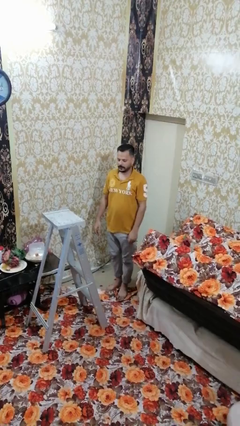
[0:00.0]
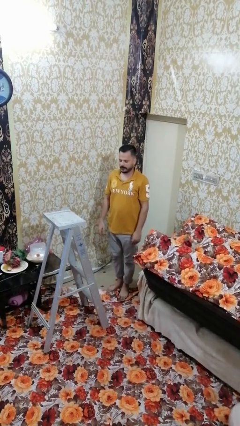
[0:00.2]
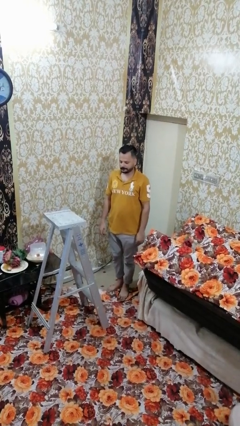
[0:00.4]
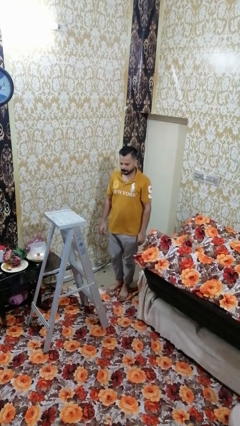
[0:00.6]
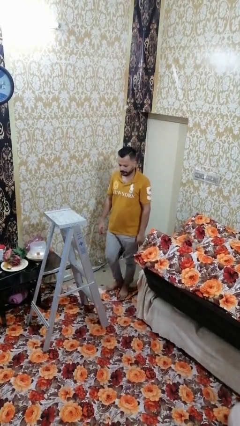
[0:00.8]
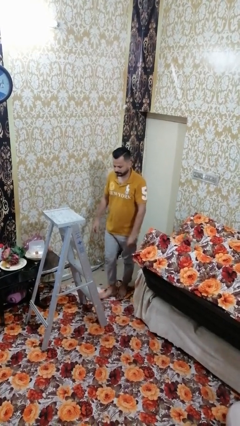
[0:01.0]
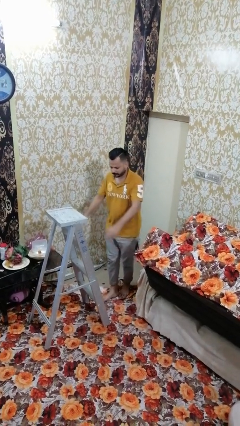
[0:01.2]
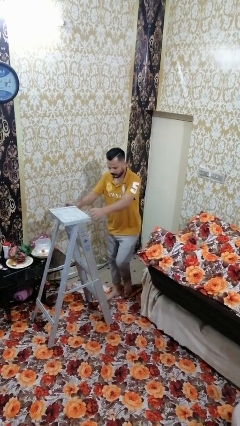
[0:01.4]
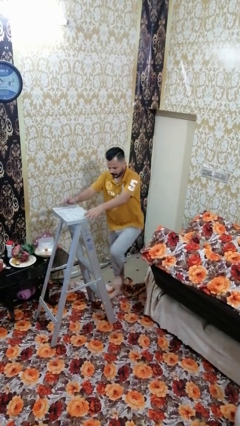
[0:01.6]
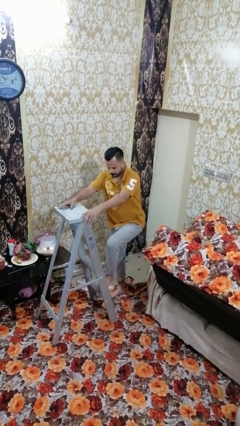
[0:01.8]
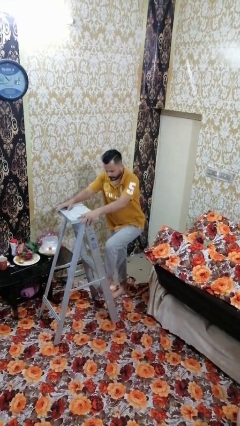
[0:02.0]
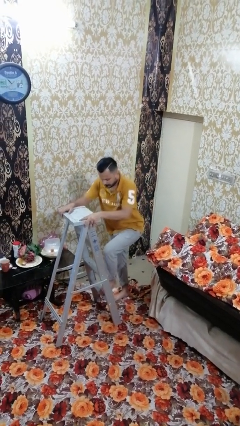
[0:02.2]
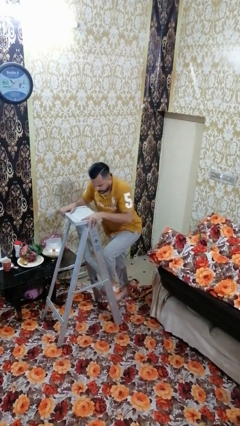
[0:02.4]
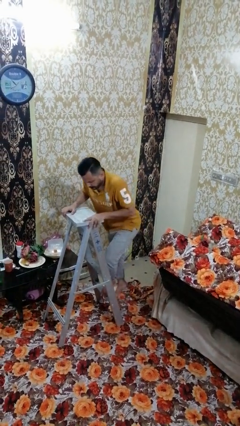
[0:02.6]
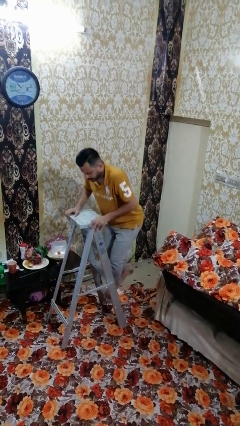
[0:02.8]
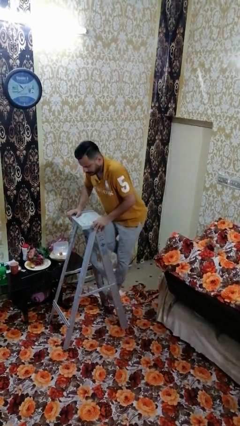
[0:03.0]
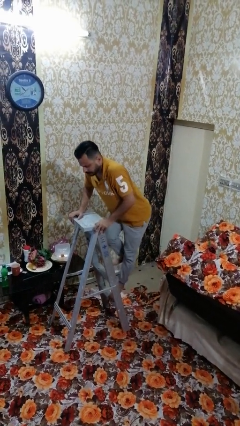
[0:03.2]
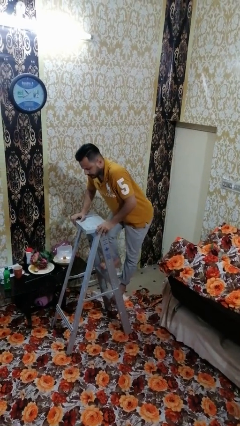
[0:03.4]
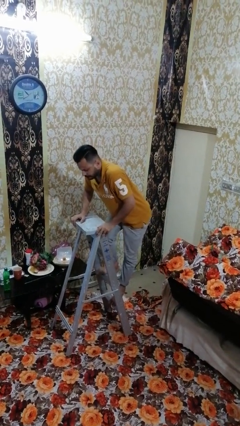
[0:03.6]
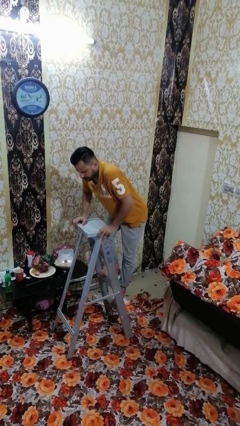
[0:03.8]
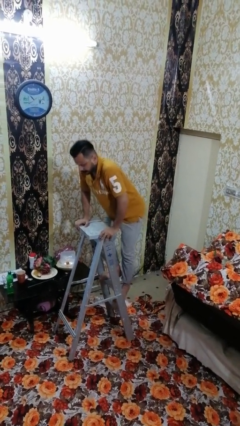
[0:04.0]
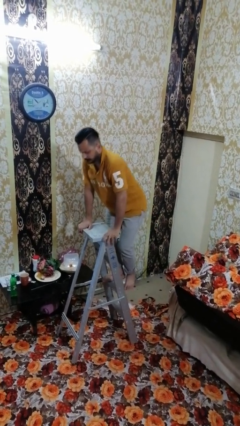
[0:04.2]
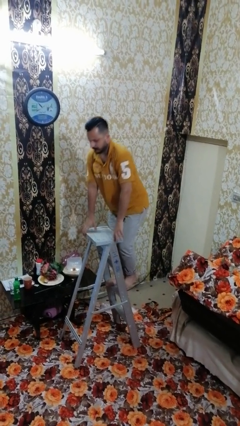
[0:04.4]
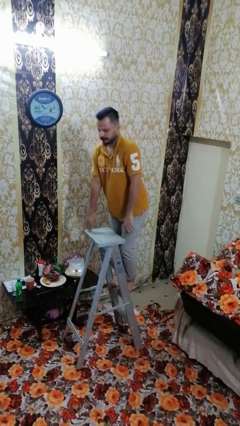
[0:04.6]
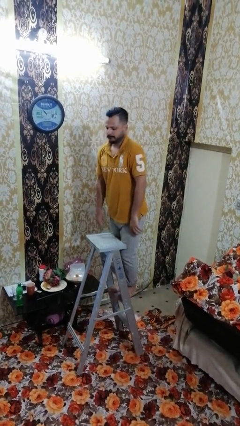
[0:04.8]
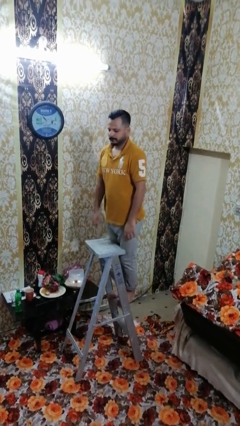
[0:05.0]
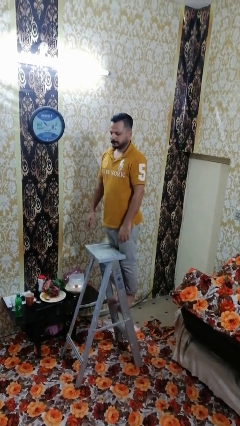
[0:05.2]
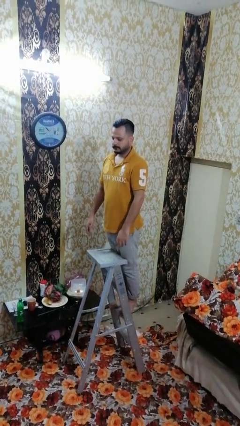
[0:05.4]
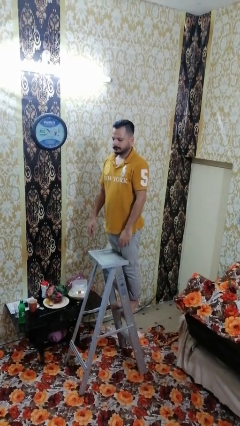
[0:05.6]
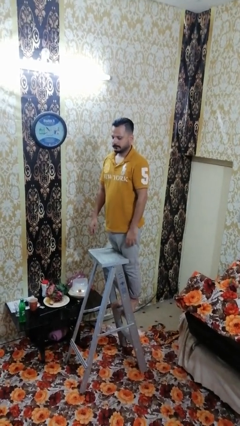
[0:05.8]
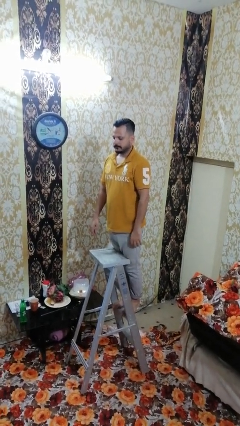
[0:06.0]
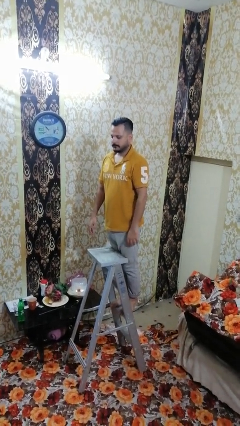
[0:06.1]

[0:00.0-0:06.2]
person climbs up ladder

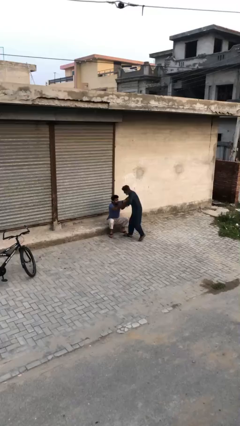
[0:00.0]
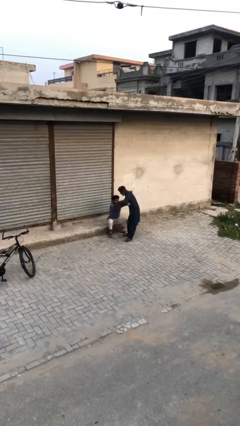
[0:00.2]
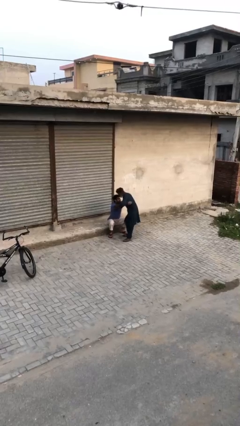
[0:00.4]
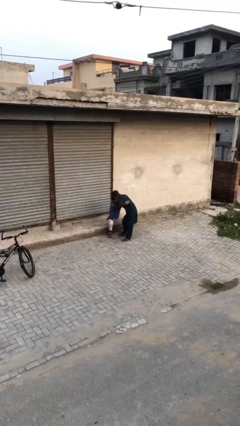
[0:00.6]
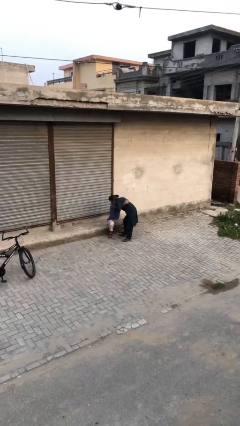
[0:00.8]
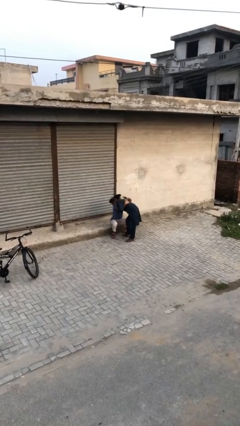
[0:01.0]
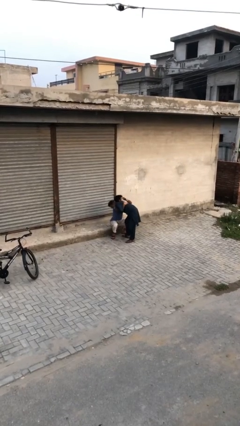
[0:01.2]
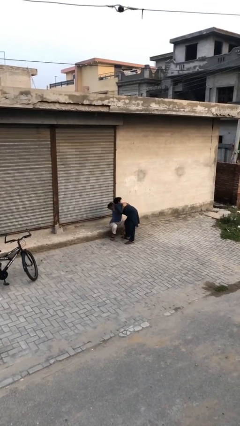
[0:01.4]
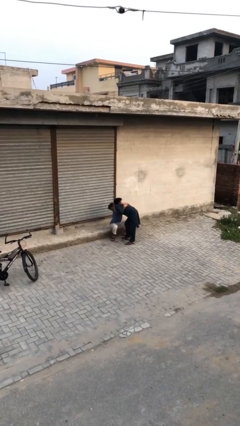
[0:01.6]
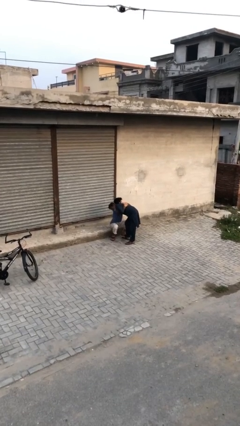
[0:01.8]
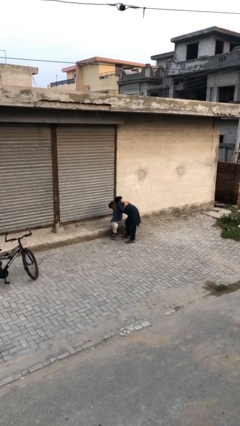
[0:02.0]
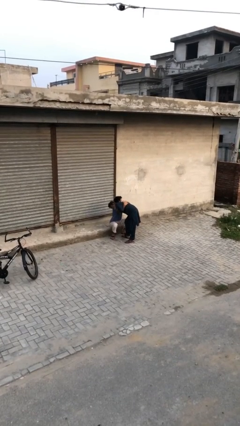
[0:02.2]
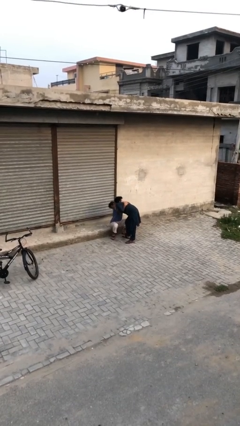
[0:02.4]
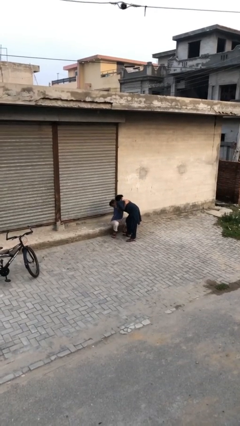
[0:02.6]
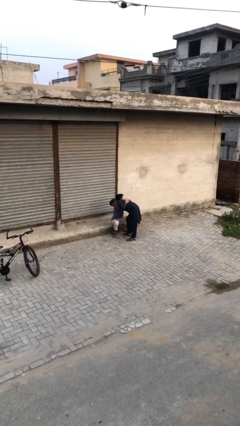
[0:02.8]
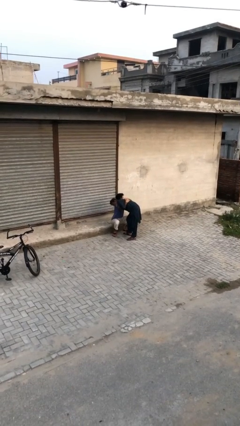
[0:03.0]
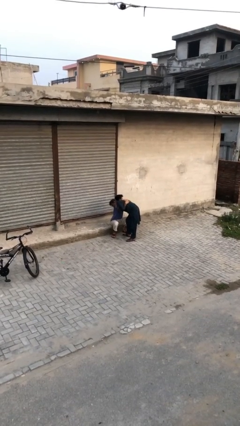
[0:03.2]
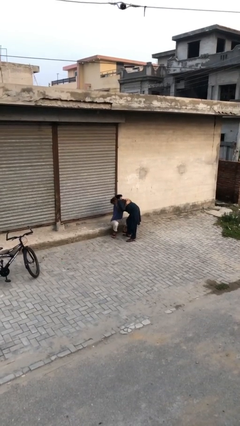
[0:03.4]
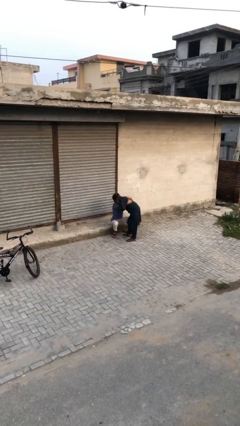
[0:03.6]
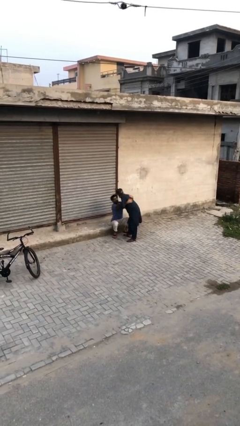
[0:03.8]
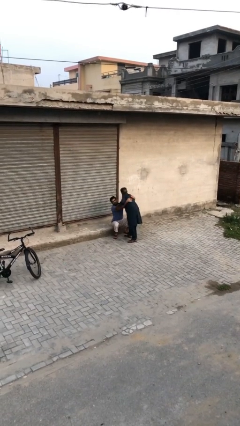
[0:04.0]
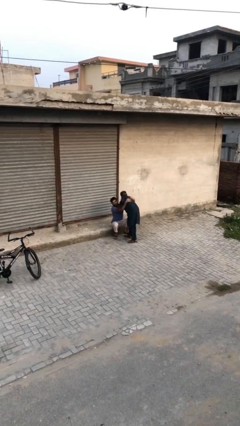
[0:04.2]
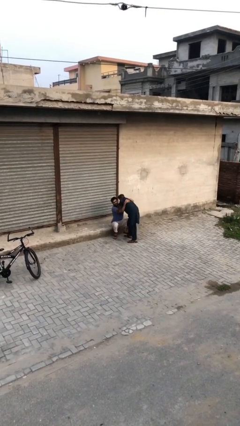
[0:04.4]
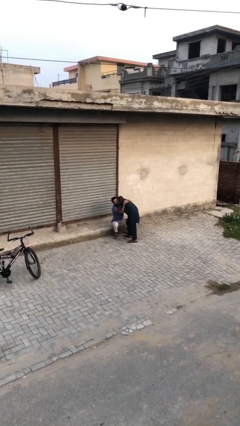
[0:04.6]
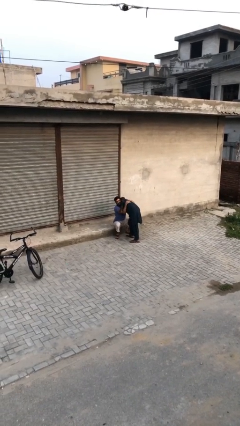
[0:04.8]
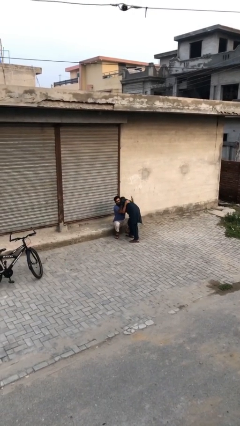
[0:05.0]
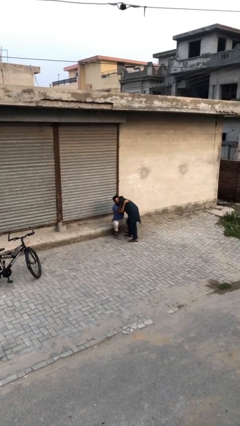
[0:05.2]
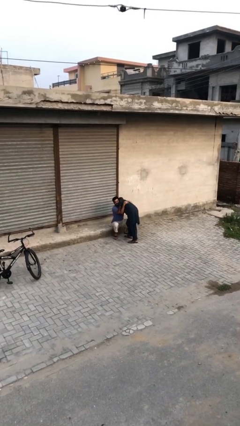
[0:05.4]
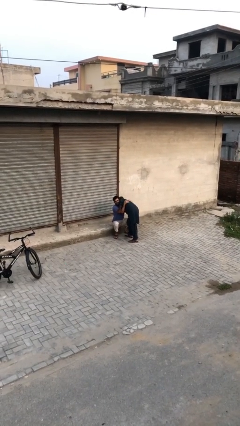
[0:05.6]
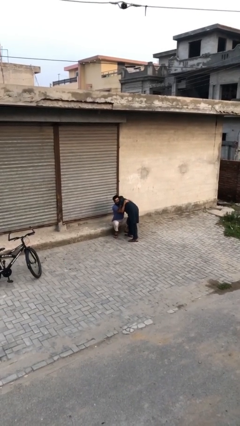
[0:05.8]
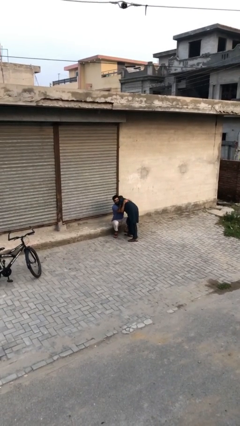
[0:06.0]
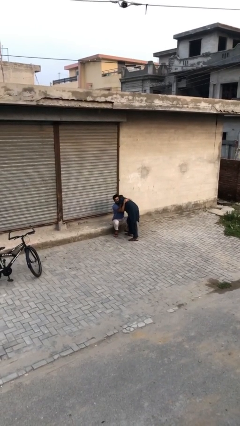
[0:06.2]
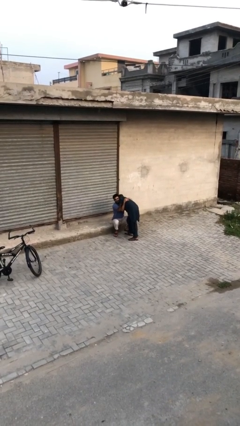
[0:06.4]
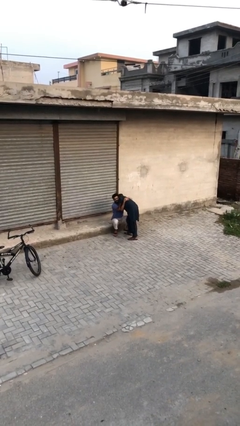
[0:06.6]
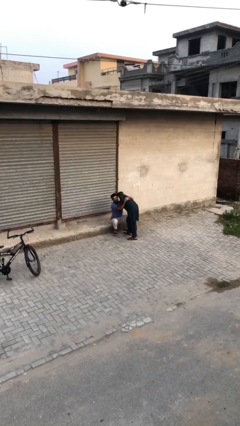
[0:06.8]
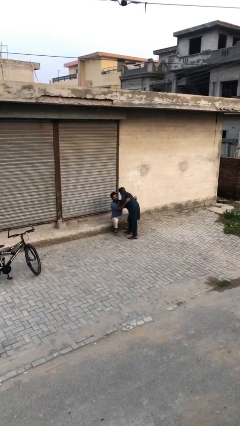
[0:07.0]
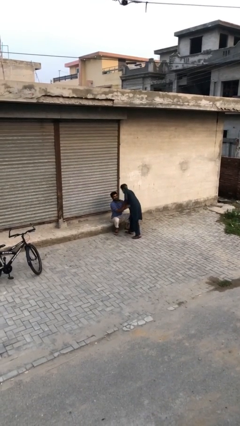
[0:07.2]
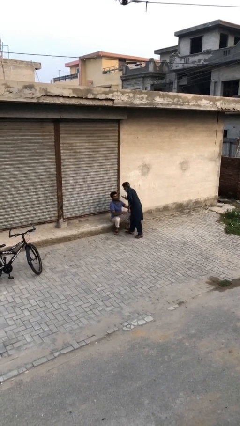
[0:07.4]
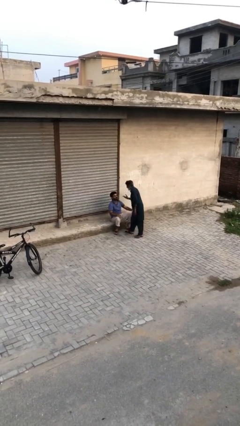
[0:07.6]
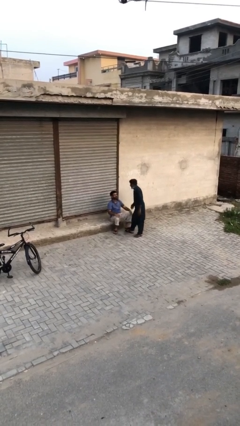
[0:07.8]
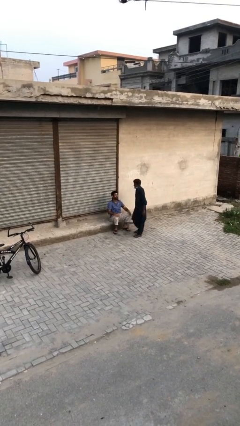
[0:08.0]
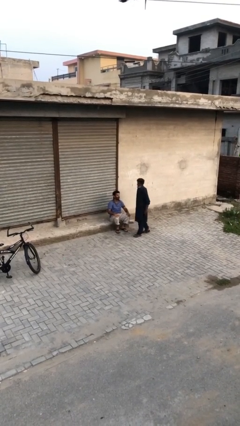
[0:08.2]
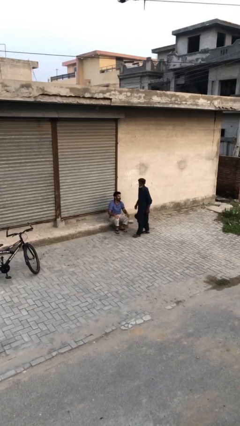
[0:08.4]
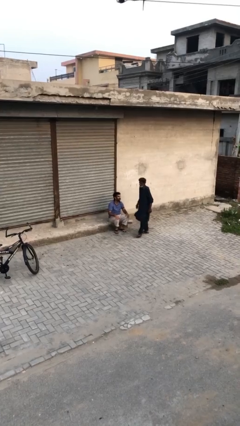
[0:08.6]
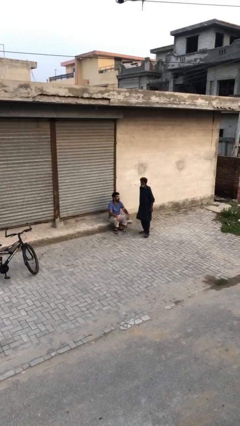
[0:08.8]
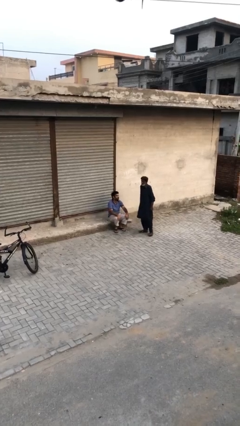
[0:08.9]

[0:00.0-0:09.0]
person embraces person

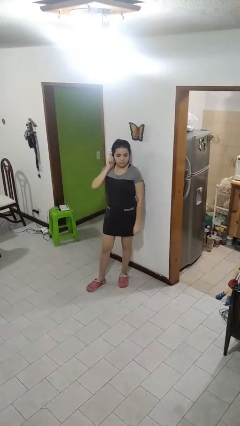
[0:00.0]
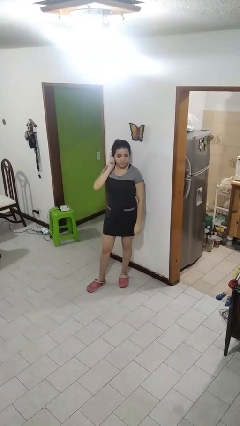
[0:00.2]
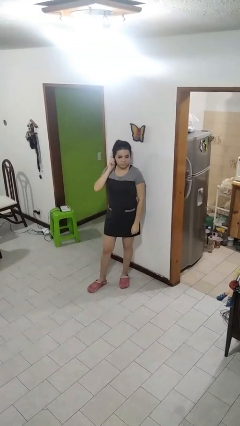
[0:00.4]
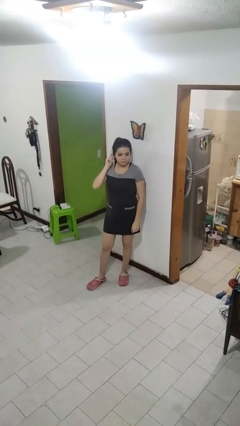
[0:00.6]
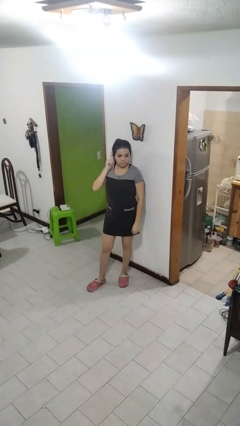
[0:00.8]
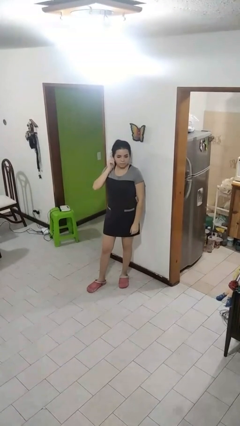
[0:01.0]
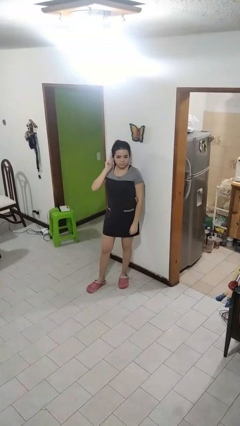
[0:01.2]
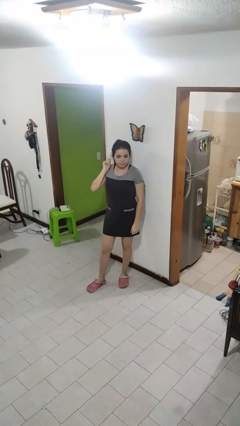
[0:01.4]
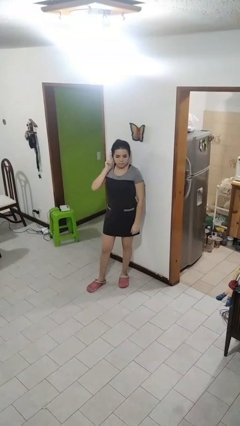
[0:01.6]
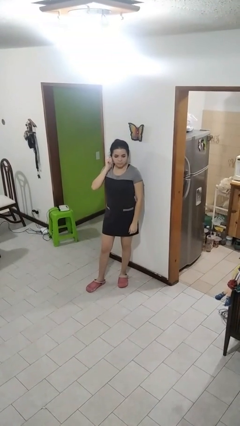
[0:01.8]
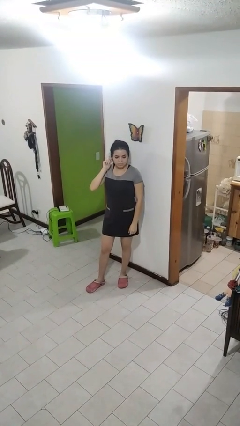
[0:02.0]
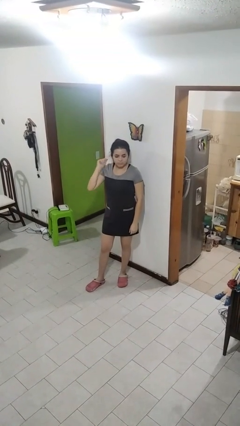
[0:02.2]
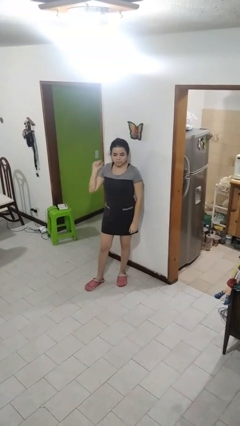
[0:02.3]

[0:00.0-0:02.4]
person touches earlobe
